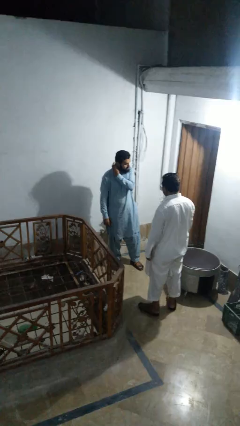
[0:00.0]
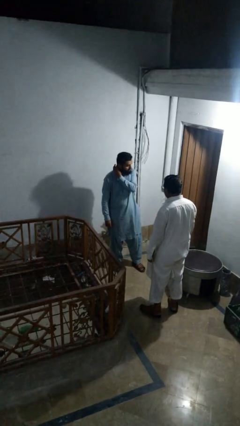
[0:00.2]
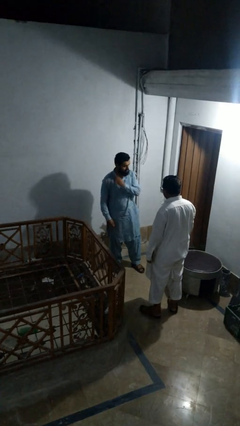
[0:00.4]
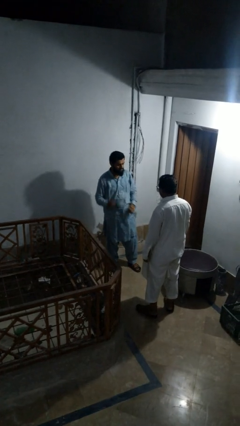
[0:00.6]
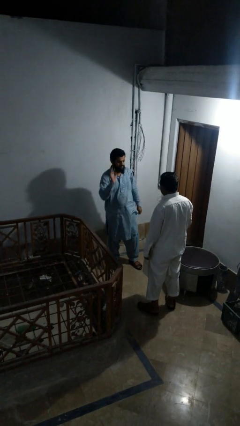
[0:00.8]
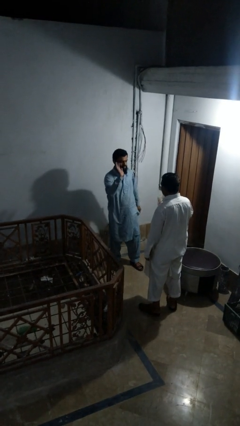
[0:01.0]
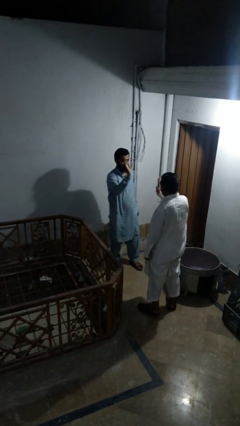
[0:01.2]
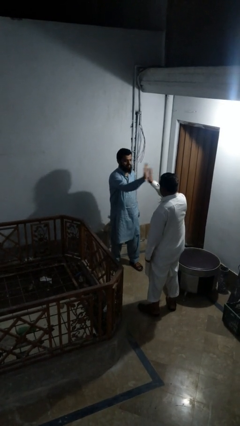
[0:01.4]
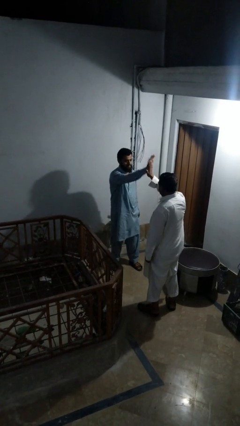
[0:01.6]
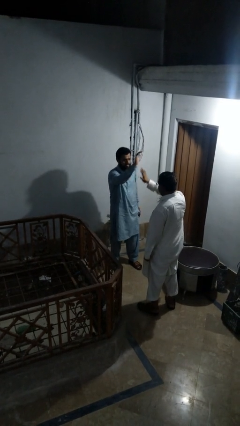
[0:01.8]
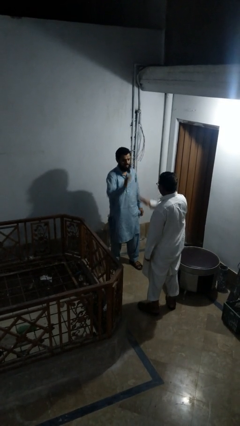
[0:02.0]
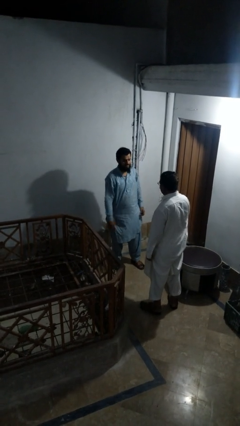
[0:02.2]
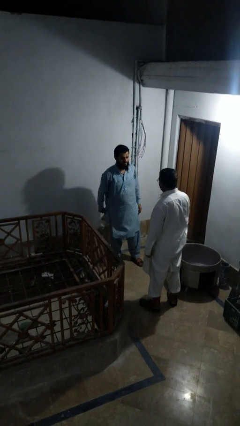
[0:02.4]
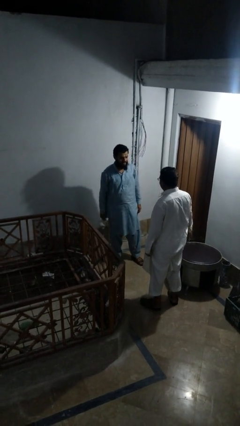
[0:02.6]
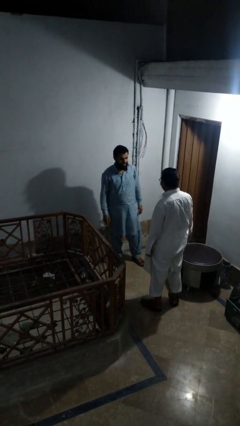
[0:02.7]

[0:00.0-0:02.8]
person highfives hand

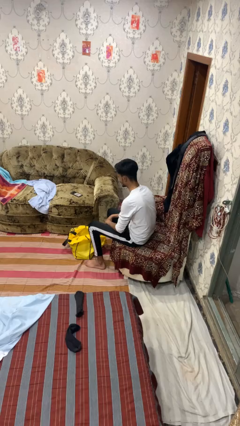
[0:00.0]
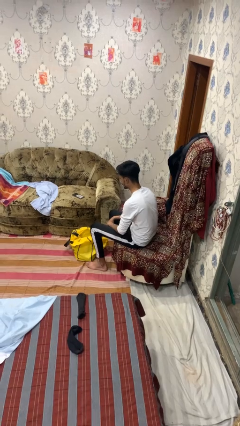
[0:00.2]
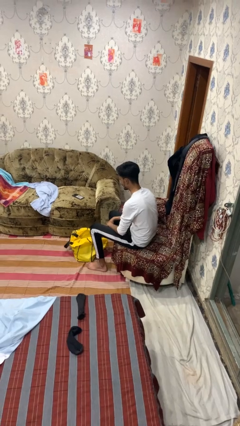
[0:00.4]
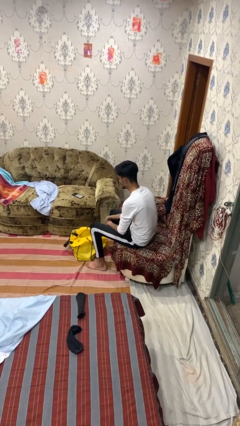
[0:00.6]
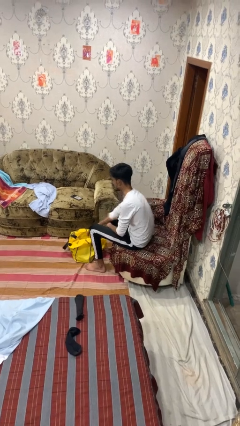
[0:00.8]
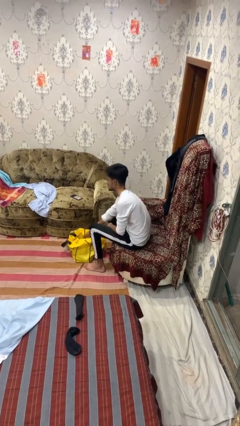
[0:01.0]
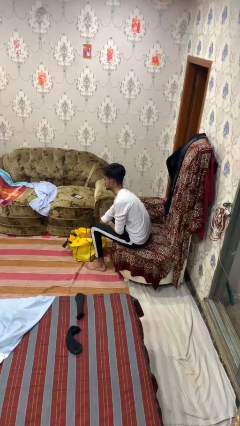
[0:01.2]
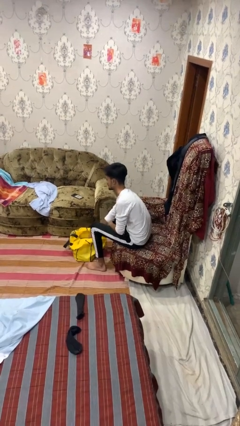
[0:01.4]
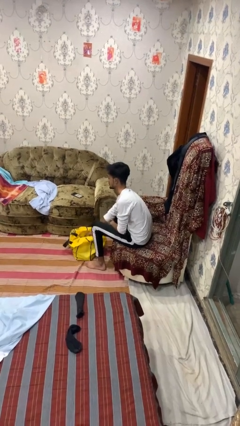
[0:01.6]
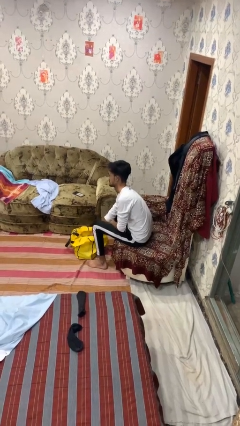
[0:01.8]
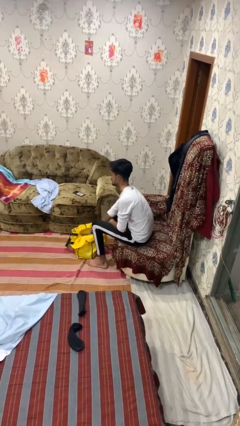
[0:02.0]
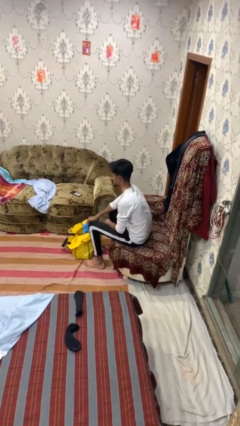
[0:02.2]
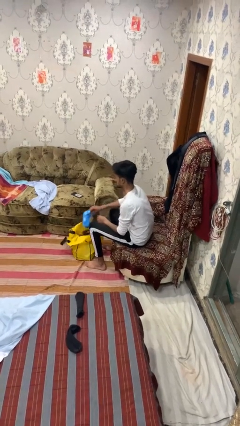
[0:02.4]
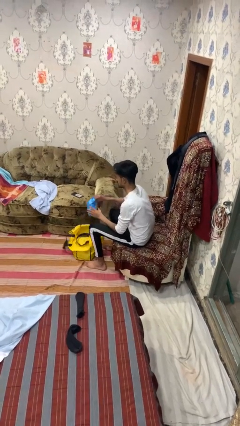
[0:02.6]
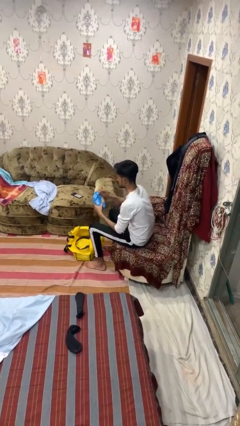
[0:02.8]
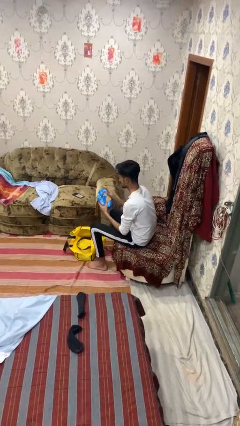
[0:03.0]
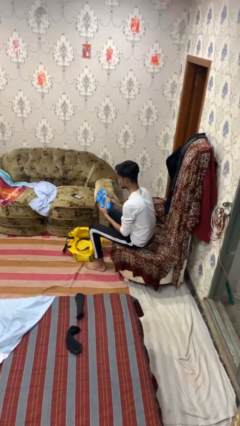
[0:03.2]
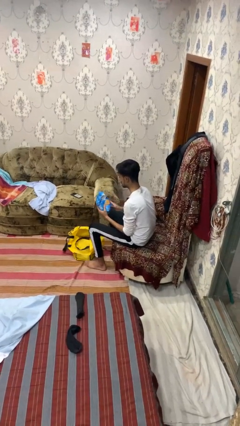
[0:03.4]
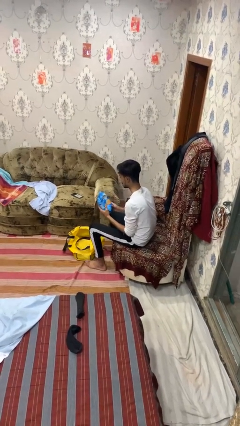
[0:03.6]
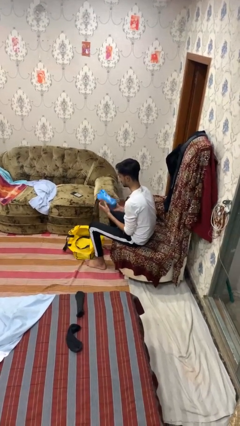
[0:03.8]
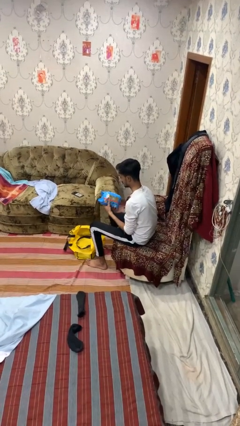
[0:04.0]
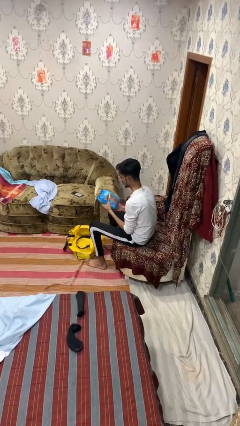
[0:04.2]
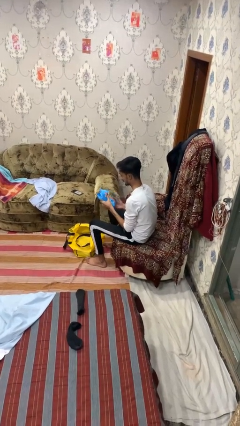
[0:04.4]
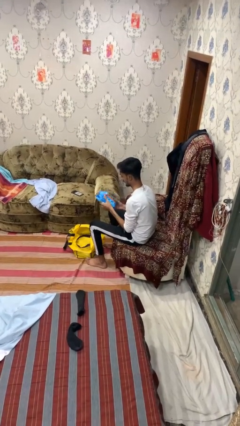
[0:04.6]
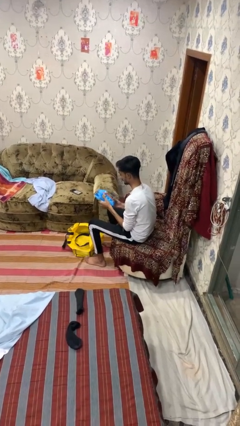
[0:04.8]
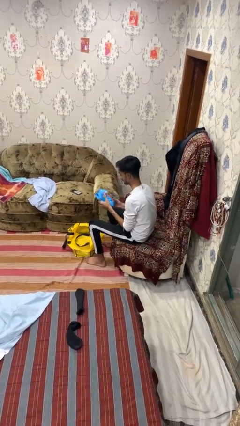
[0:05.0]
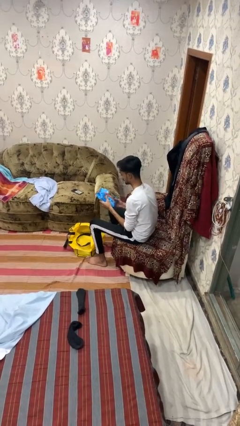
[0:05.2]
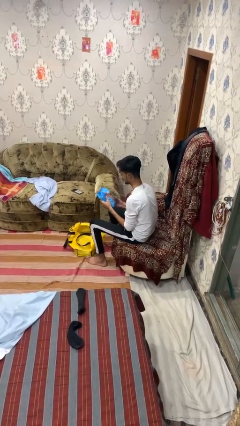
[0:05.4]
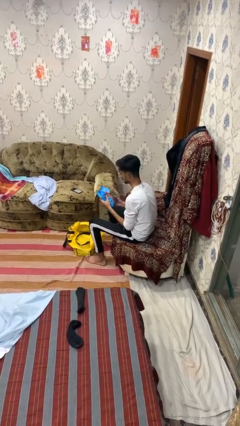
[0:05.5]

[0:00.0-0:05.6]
person takes object from bag

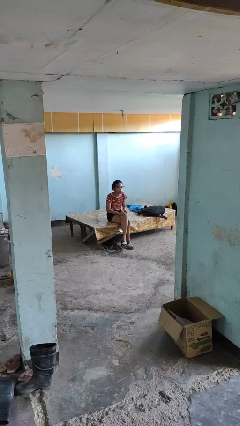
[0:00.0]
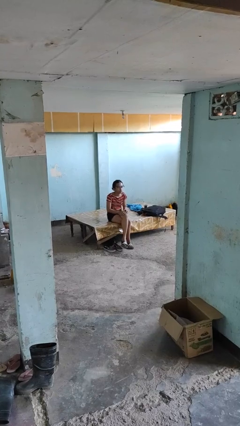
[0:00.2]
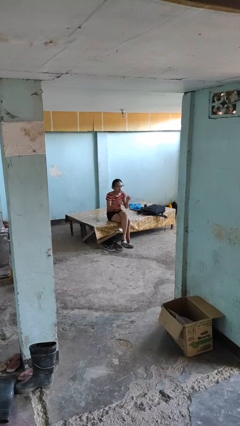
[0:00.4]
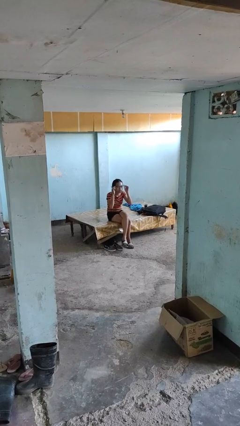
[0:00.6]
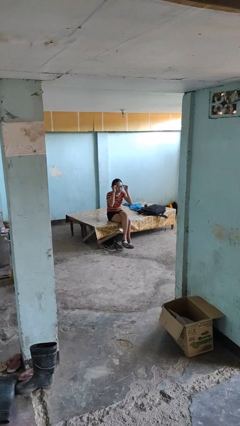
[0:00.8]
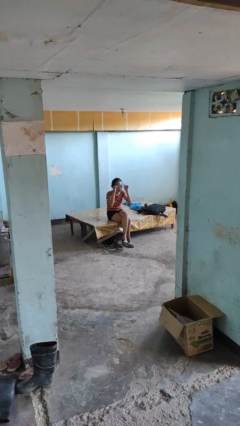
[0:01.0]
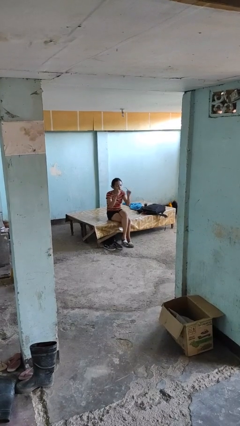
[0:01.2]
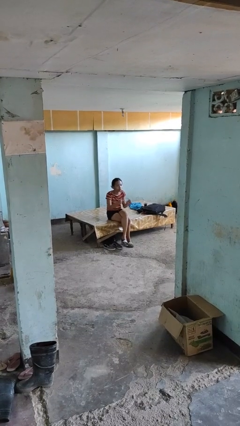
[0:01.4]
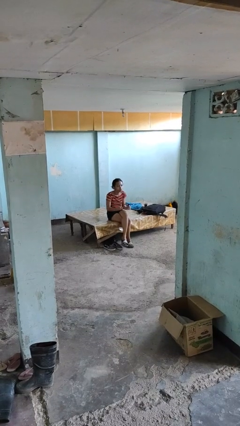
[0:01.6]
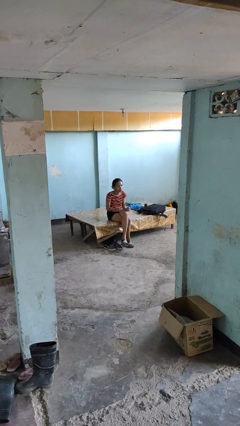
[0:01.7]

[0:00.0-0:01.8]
person takes off glasses

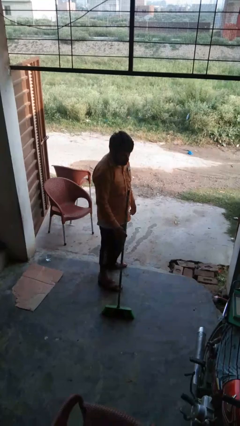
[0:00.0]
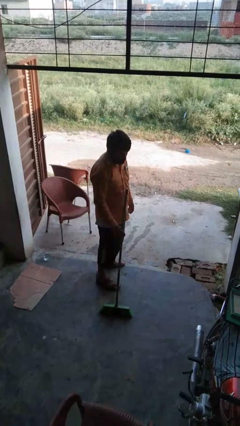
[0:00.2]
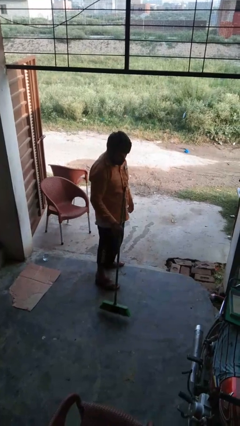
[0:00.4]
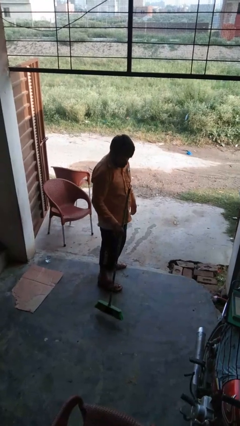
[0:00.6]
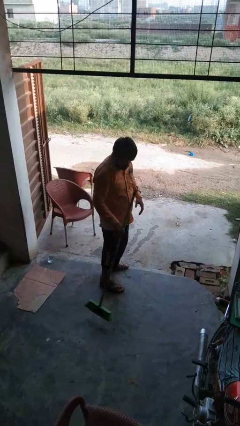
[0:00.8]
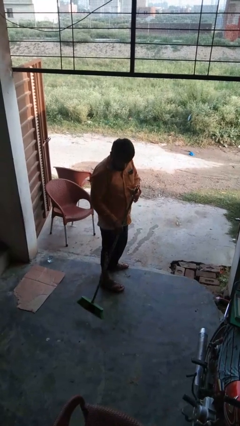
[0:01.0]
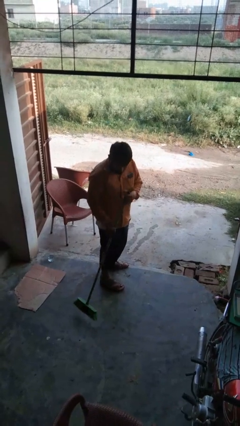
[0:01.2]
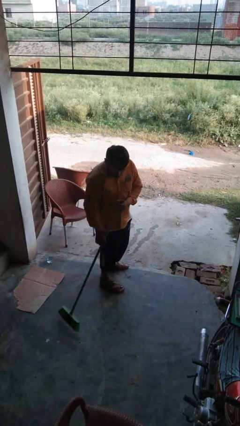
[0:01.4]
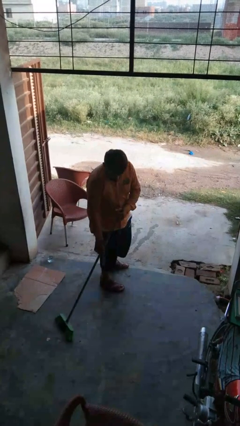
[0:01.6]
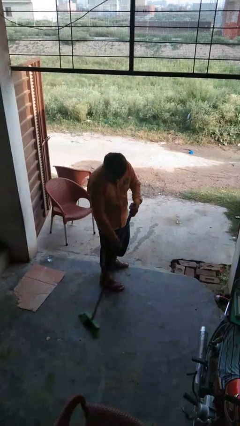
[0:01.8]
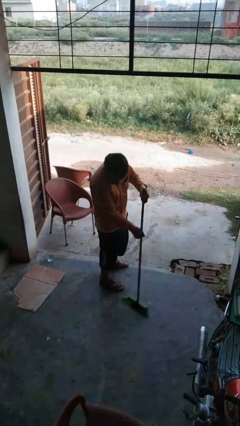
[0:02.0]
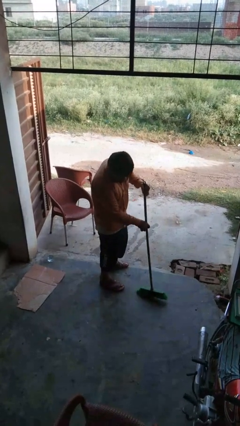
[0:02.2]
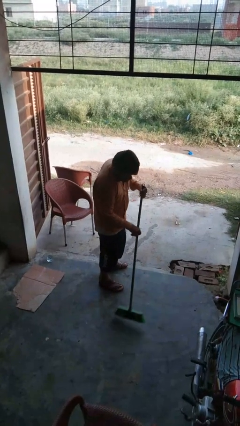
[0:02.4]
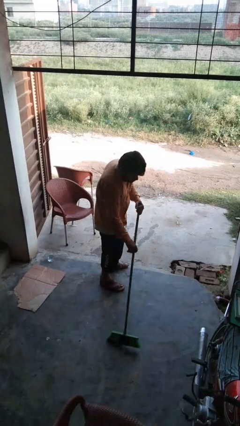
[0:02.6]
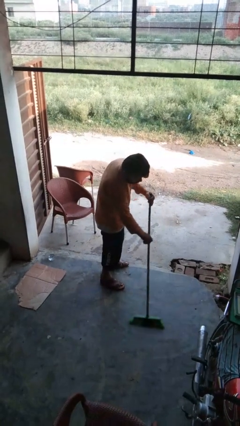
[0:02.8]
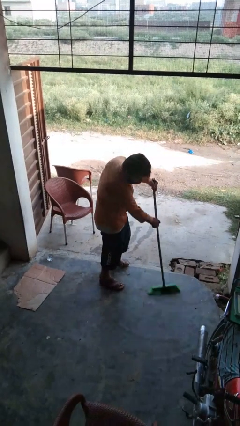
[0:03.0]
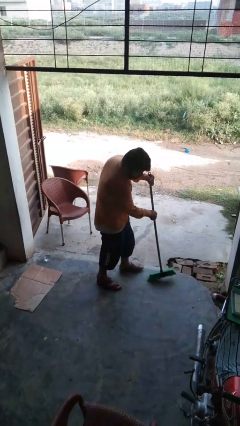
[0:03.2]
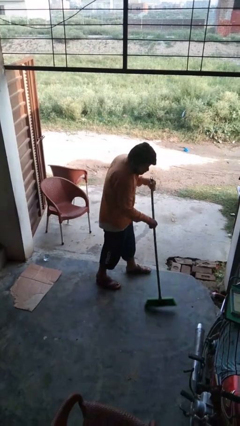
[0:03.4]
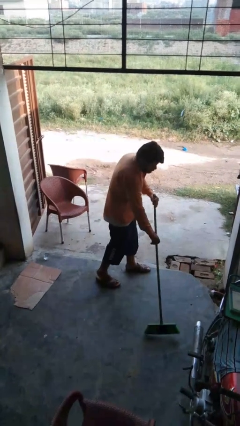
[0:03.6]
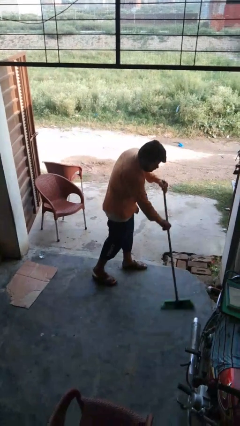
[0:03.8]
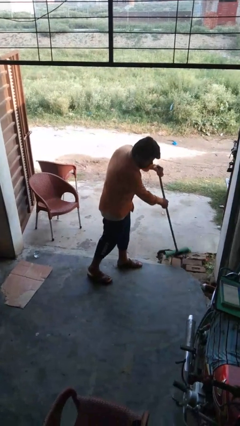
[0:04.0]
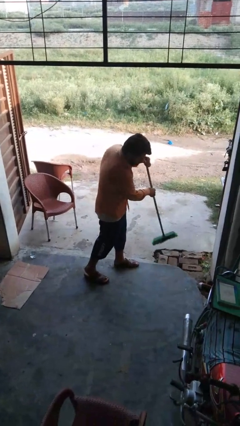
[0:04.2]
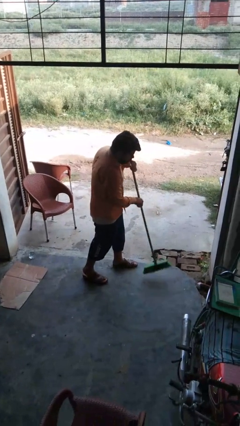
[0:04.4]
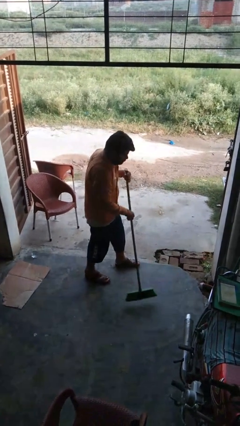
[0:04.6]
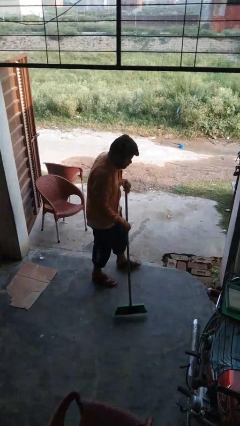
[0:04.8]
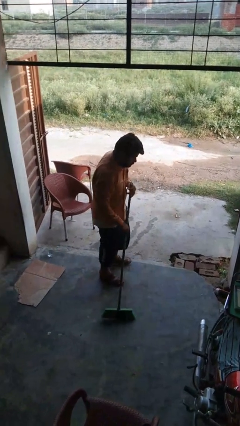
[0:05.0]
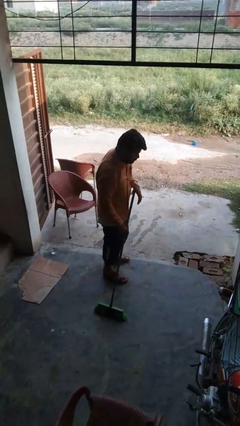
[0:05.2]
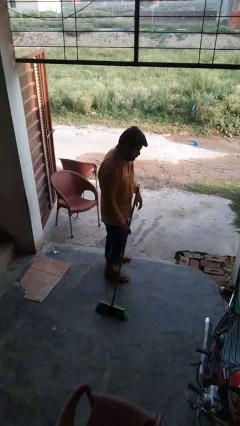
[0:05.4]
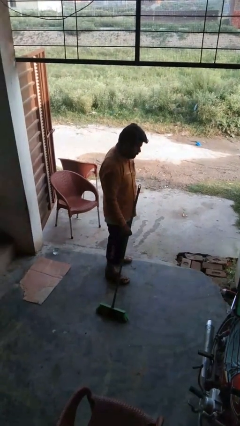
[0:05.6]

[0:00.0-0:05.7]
person mops

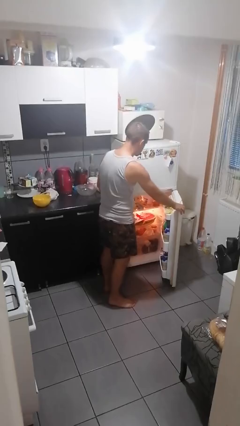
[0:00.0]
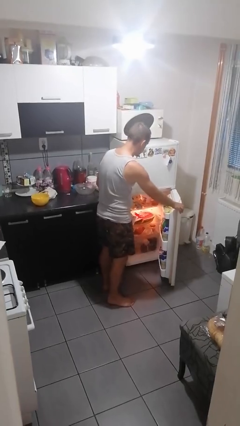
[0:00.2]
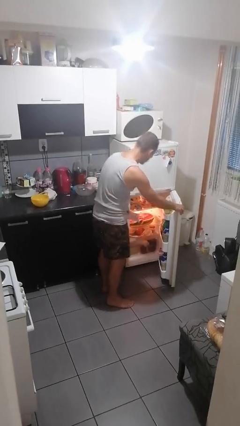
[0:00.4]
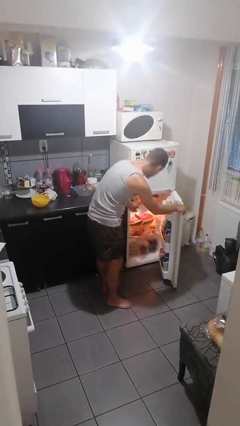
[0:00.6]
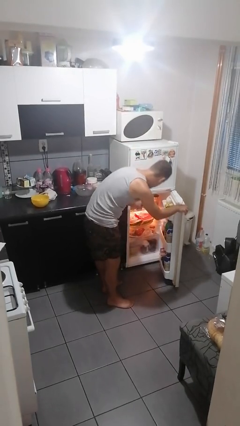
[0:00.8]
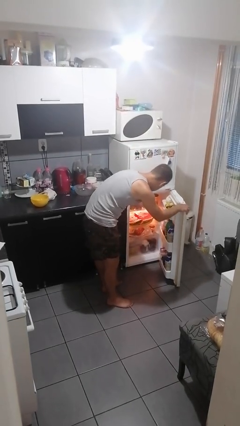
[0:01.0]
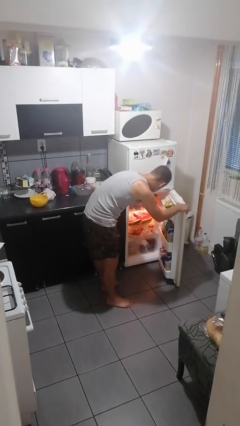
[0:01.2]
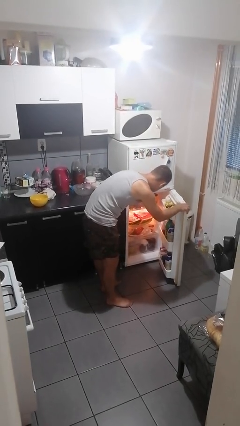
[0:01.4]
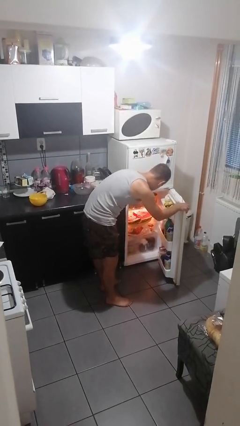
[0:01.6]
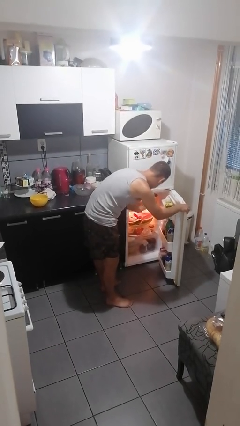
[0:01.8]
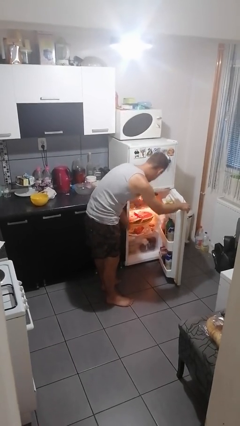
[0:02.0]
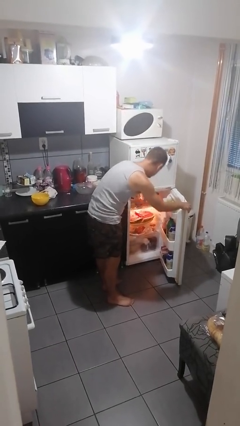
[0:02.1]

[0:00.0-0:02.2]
person puts object into refrigerator
